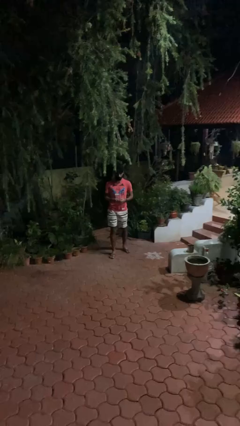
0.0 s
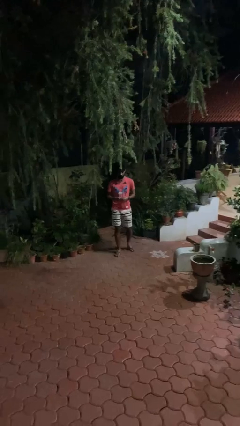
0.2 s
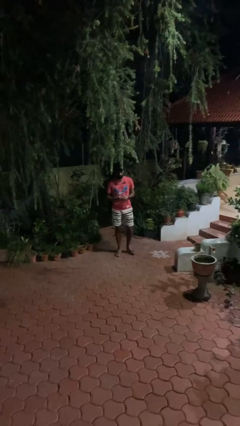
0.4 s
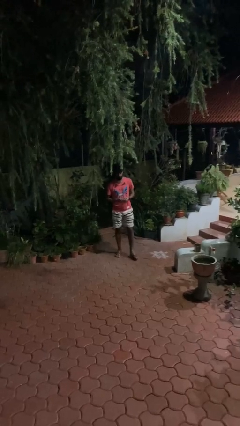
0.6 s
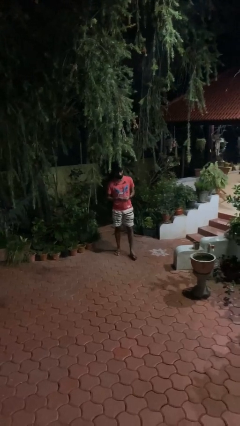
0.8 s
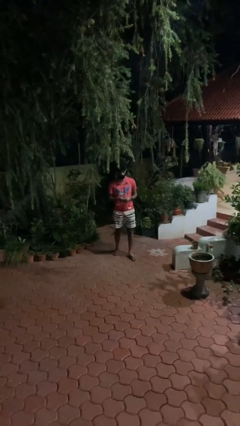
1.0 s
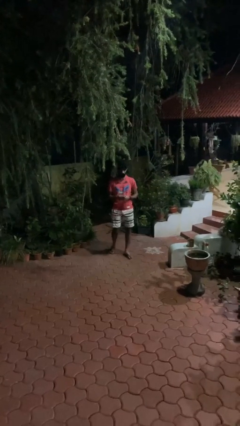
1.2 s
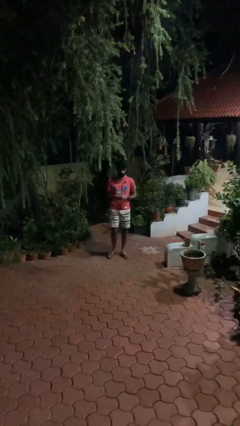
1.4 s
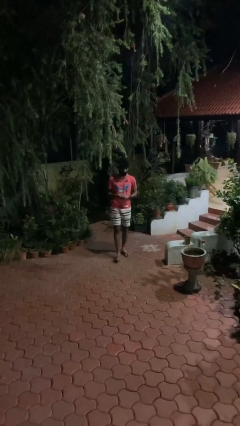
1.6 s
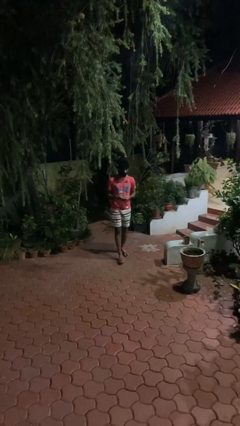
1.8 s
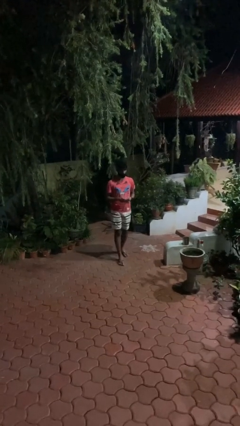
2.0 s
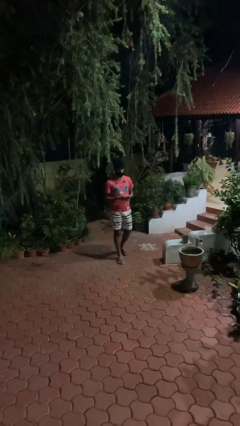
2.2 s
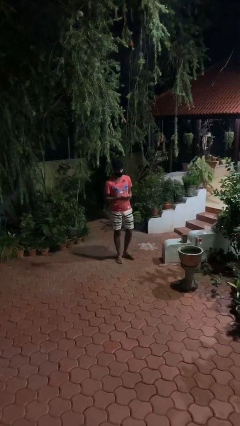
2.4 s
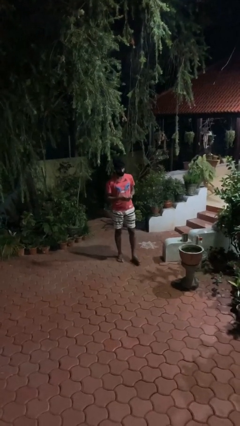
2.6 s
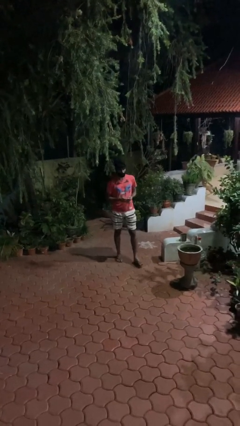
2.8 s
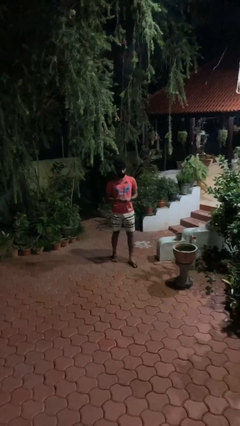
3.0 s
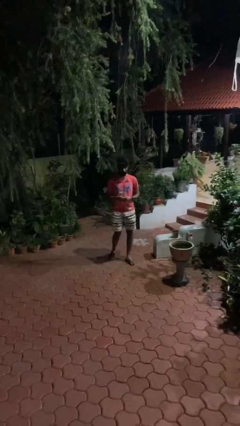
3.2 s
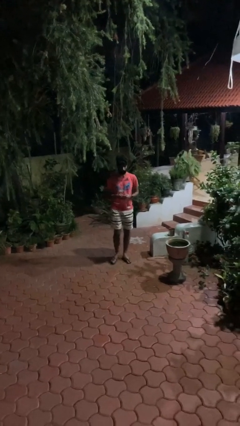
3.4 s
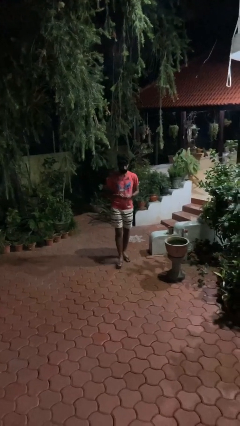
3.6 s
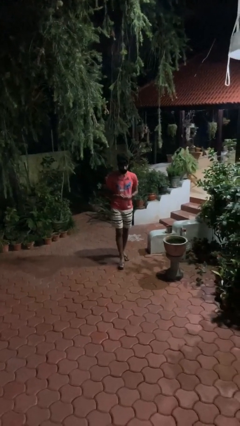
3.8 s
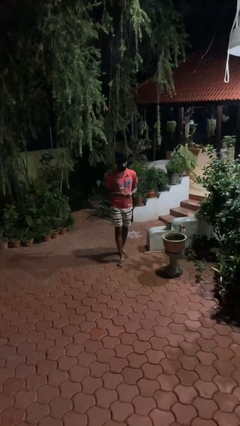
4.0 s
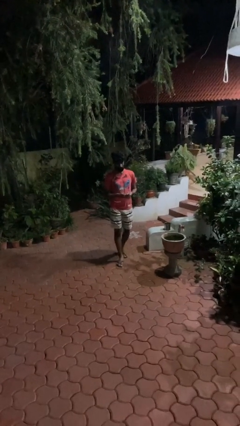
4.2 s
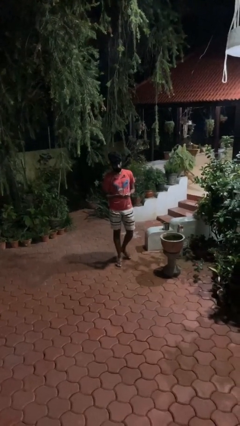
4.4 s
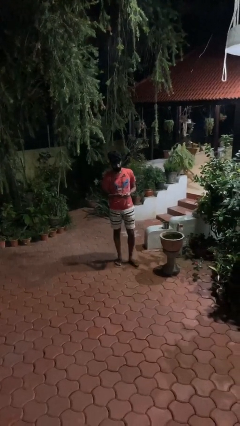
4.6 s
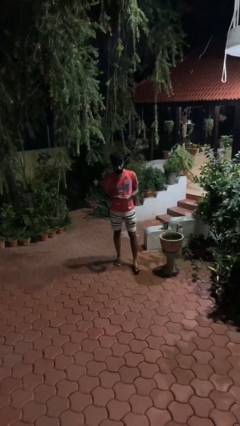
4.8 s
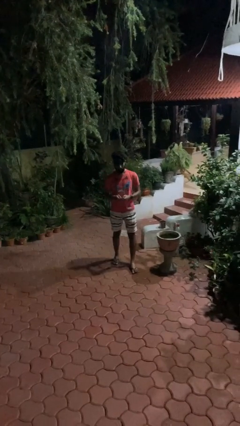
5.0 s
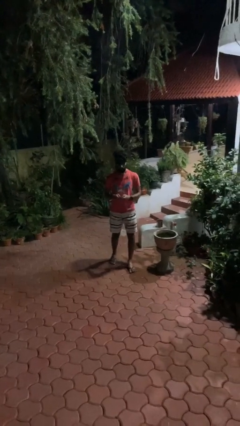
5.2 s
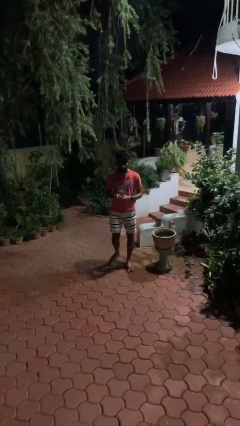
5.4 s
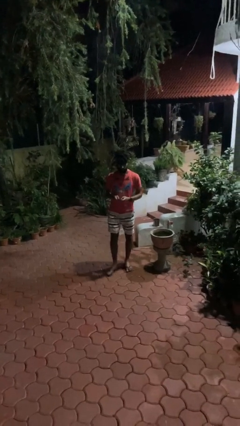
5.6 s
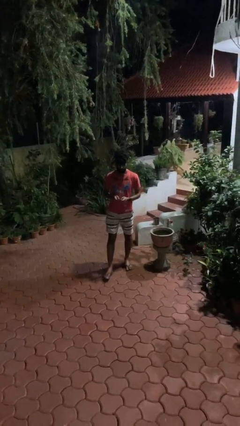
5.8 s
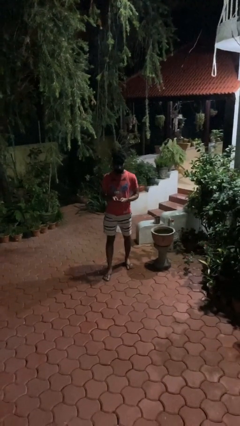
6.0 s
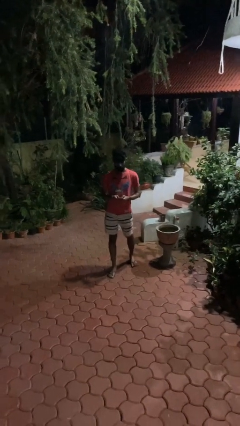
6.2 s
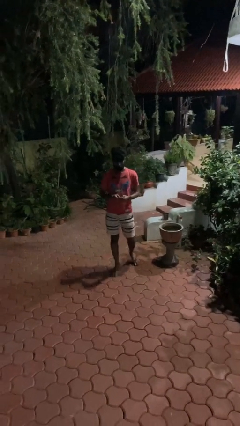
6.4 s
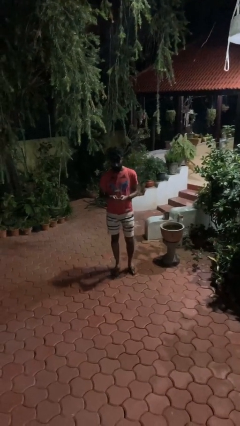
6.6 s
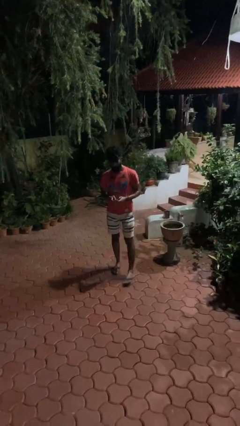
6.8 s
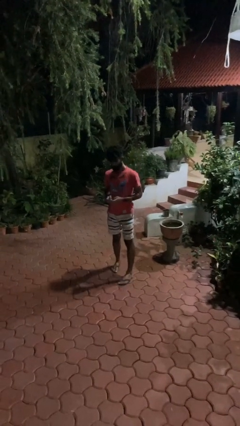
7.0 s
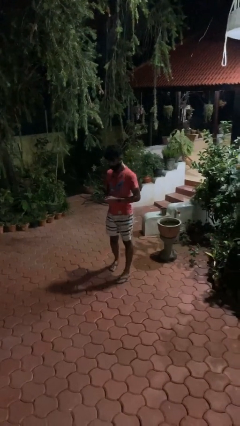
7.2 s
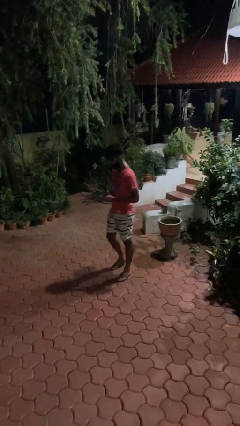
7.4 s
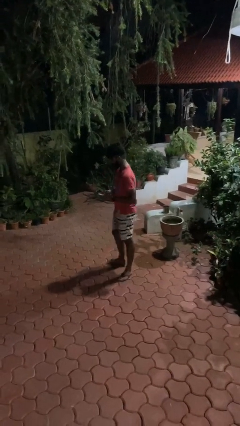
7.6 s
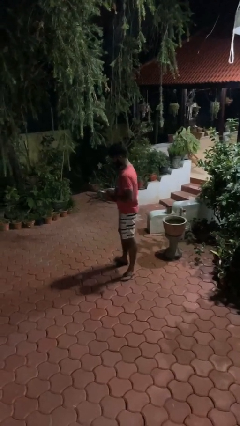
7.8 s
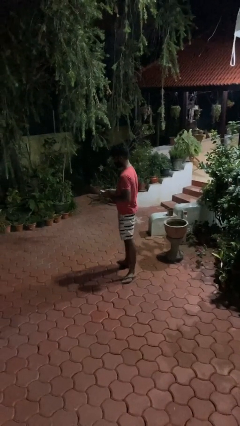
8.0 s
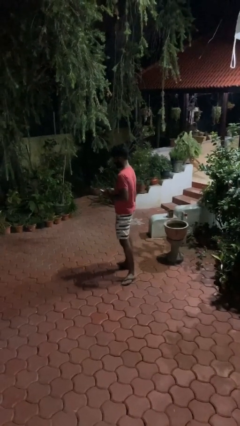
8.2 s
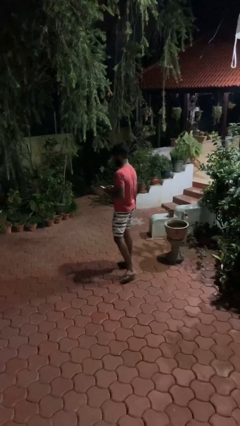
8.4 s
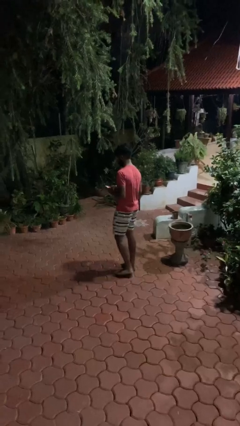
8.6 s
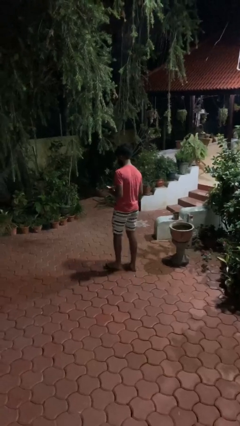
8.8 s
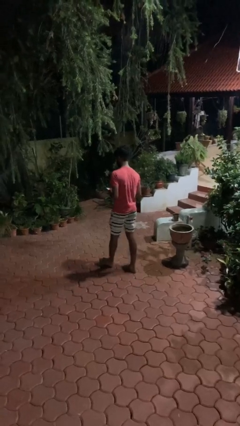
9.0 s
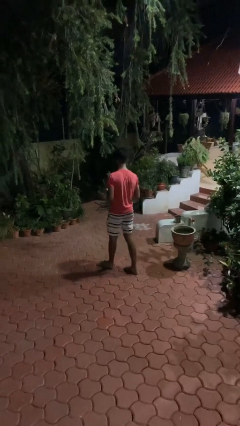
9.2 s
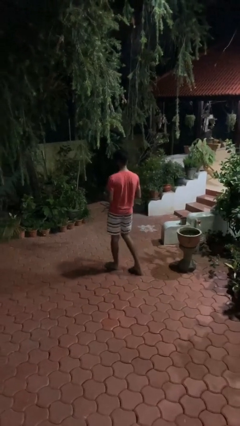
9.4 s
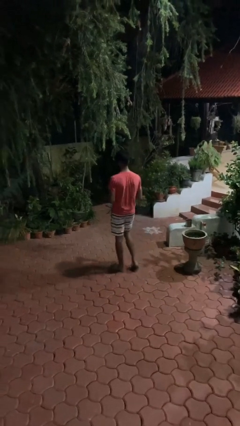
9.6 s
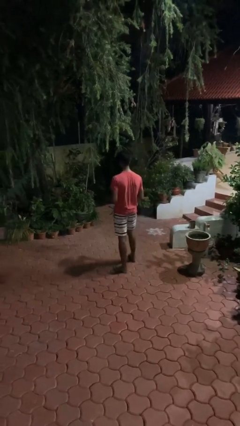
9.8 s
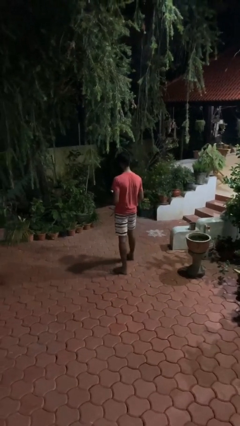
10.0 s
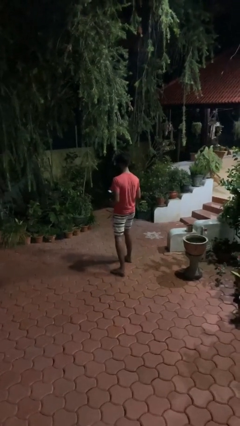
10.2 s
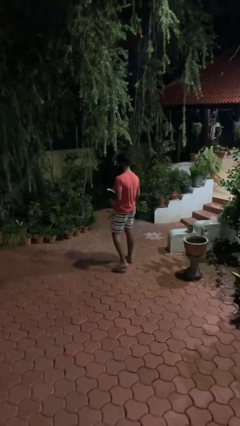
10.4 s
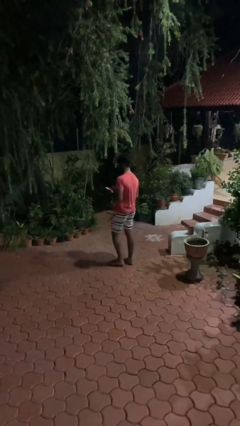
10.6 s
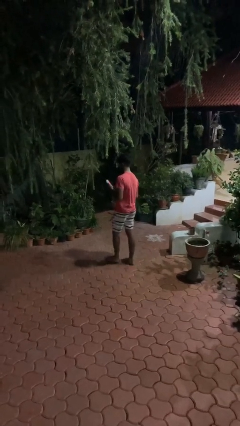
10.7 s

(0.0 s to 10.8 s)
person texts on phone

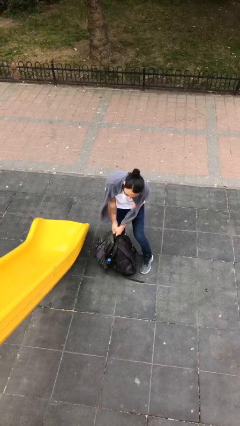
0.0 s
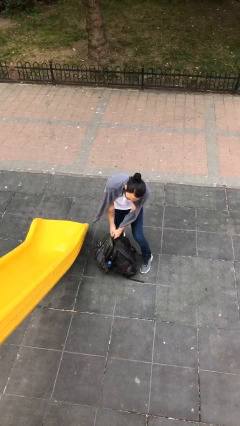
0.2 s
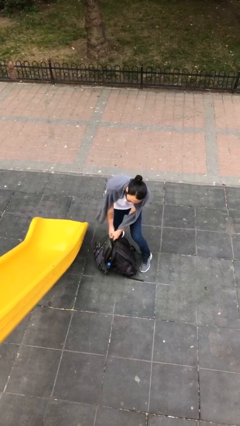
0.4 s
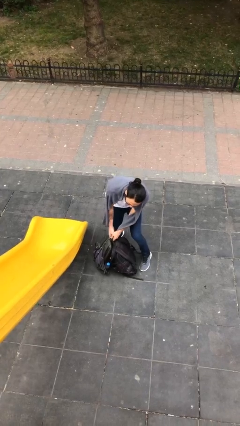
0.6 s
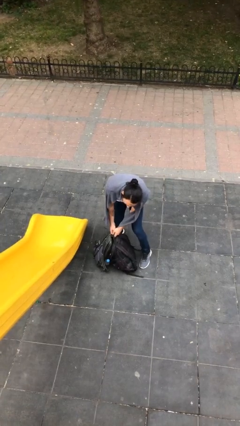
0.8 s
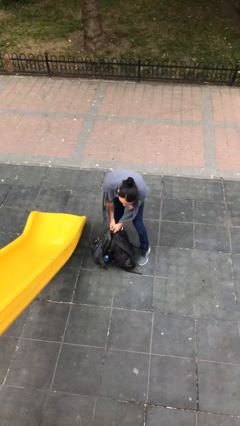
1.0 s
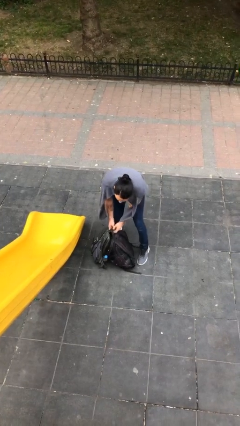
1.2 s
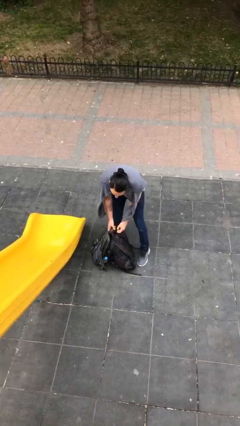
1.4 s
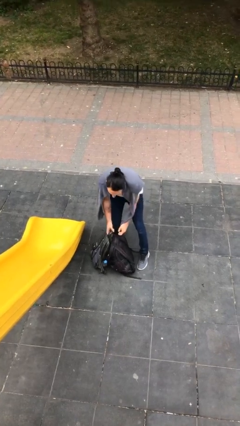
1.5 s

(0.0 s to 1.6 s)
person puts down object on floor

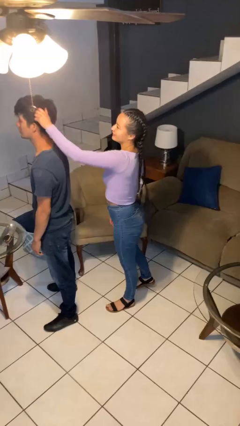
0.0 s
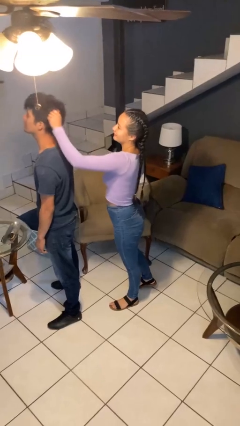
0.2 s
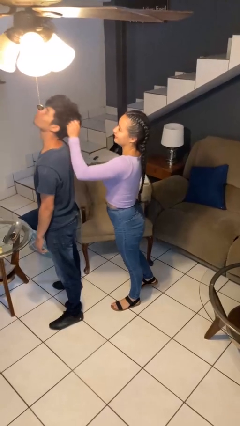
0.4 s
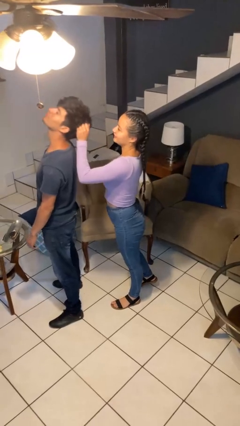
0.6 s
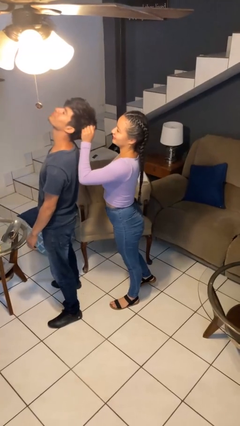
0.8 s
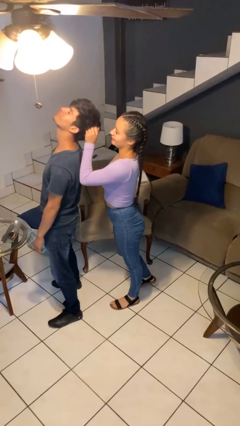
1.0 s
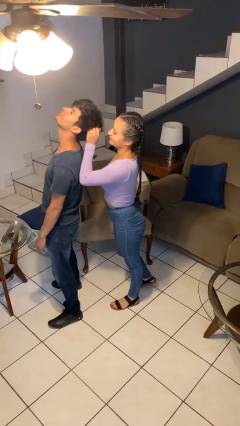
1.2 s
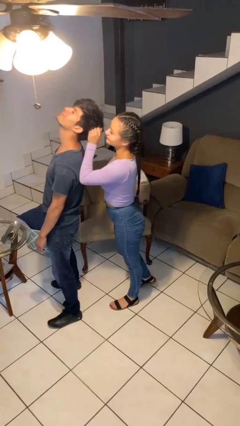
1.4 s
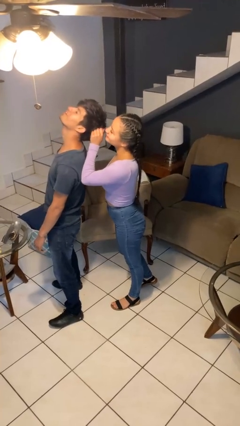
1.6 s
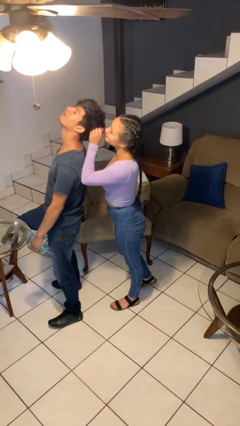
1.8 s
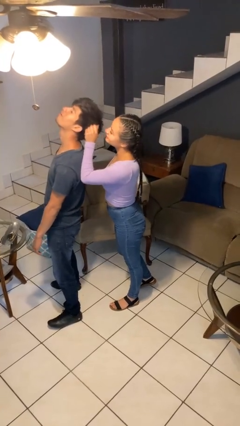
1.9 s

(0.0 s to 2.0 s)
person grabs person by hair

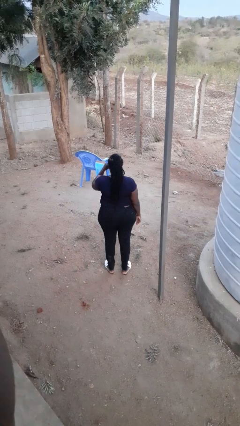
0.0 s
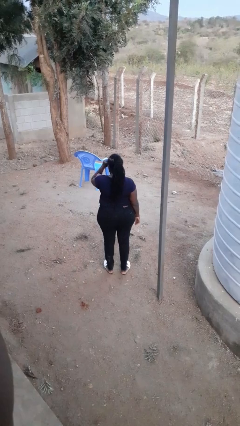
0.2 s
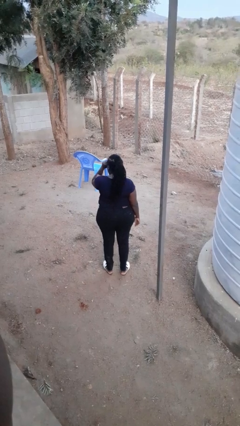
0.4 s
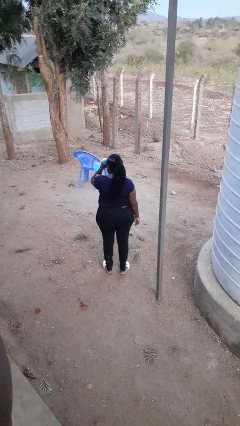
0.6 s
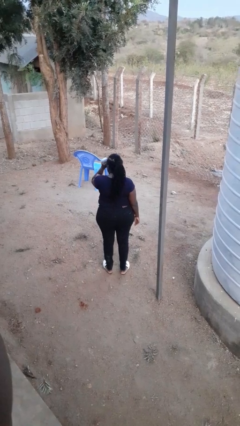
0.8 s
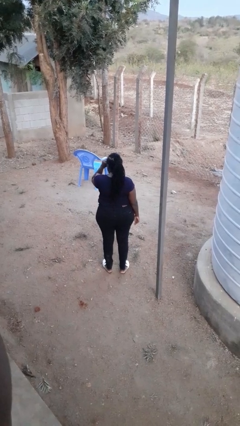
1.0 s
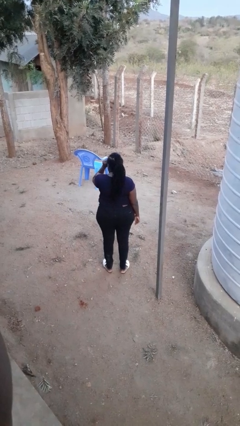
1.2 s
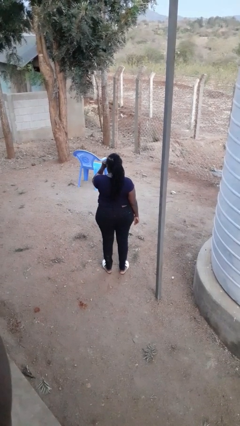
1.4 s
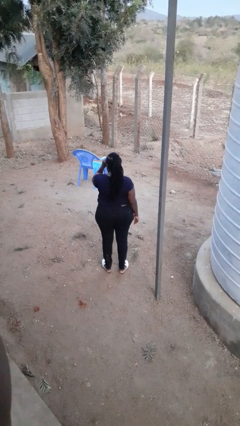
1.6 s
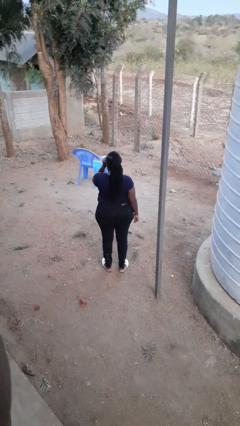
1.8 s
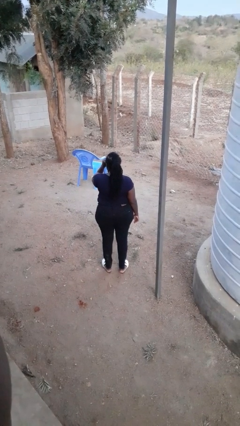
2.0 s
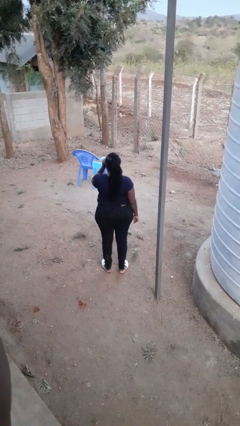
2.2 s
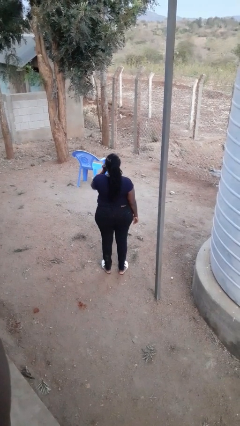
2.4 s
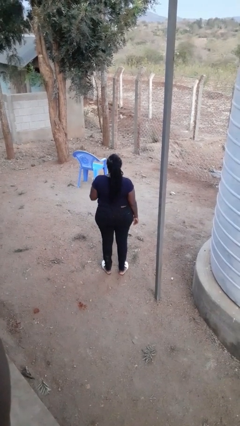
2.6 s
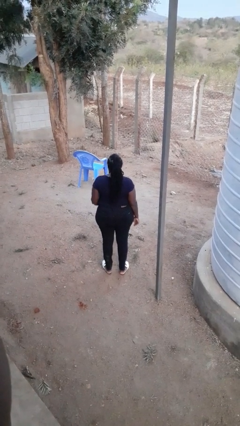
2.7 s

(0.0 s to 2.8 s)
person rubs eyes

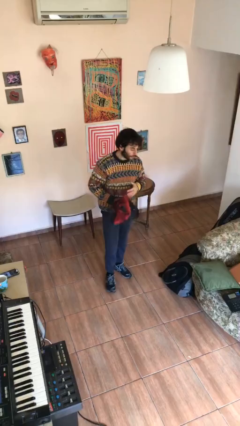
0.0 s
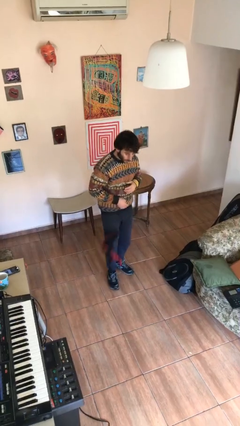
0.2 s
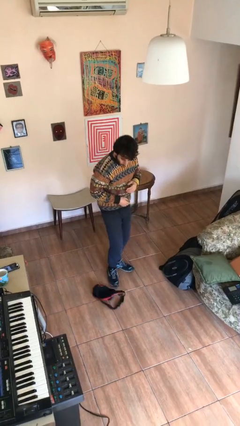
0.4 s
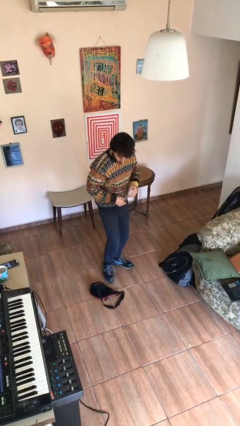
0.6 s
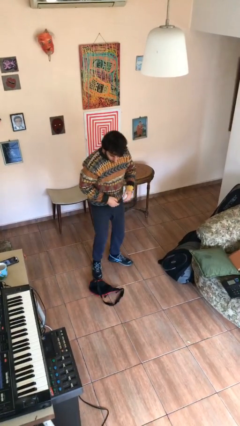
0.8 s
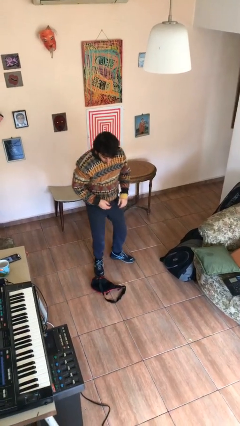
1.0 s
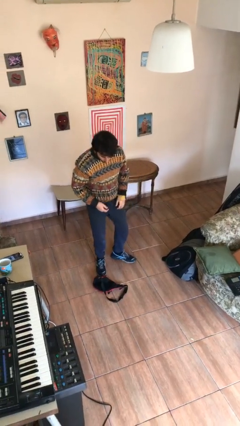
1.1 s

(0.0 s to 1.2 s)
person drops object
